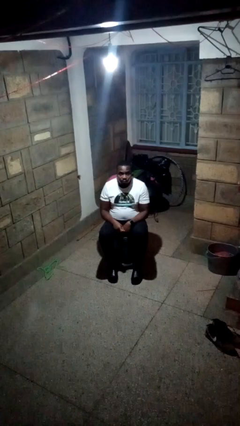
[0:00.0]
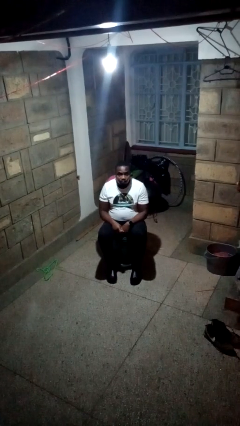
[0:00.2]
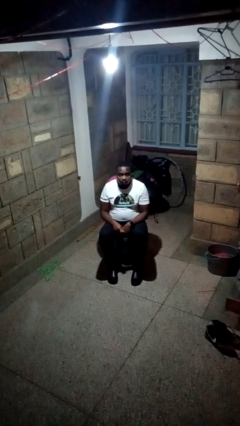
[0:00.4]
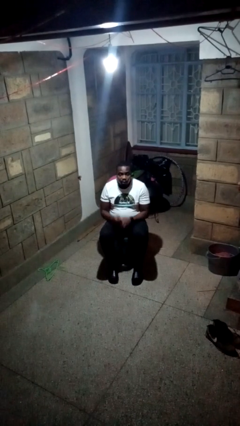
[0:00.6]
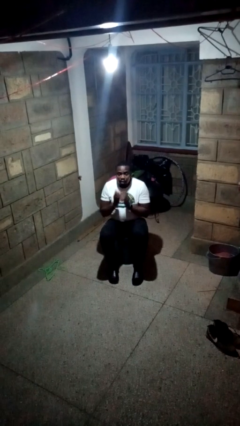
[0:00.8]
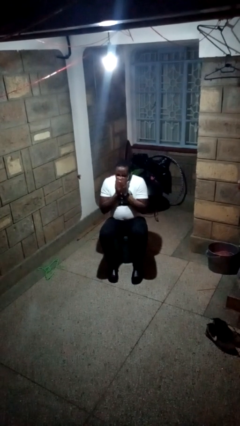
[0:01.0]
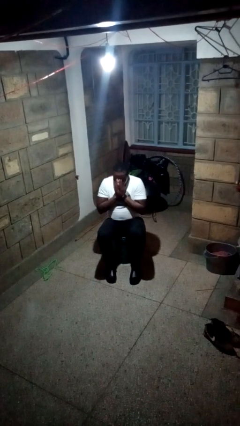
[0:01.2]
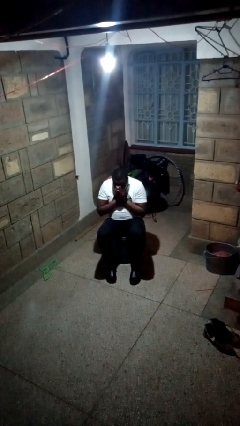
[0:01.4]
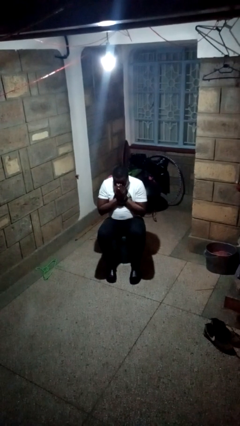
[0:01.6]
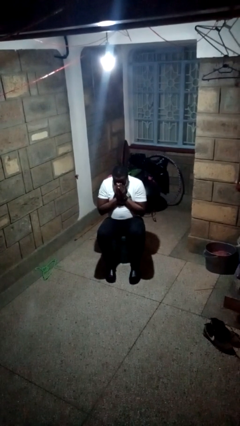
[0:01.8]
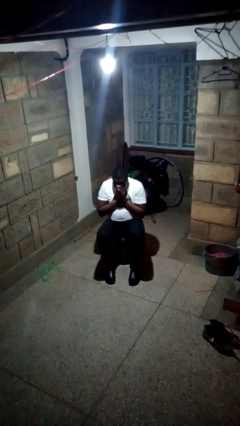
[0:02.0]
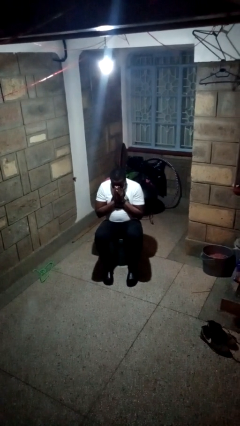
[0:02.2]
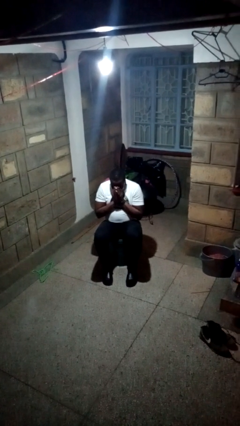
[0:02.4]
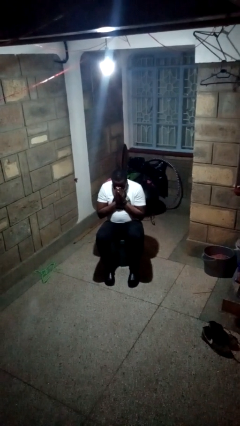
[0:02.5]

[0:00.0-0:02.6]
person sneezes into hand

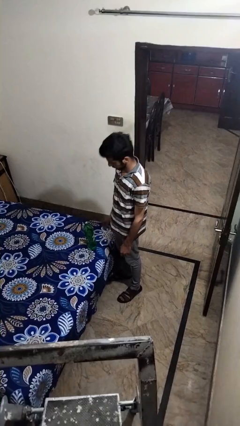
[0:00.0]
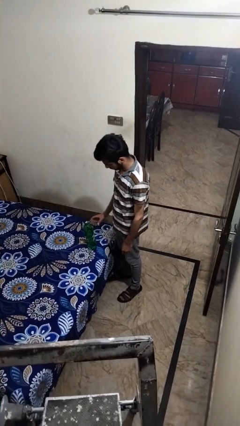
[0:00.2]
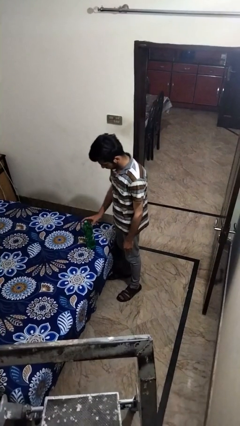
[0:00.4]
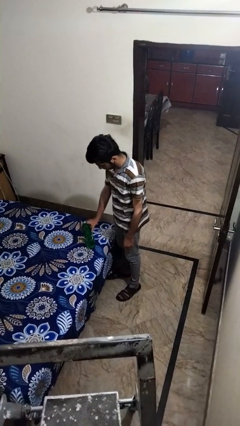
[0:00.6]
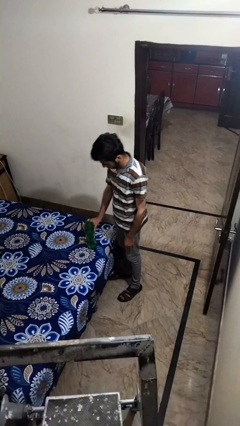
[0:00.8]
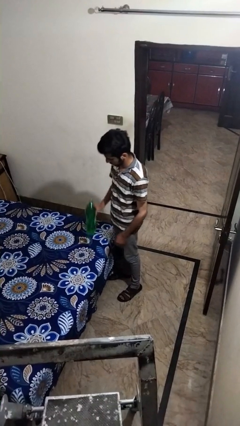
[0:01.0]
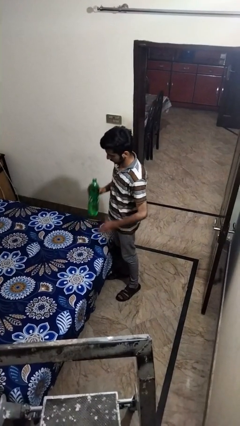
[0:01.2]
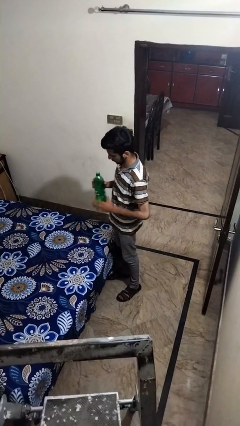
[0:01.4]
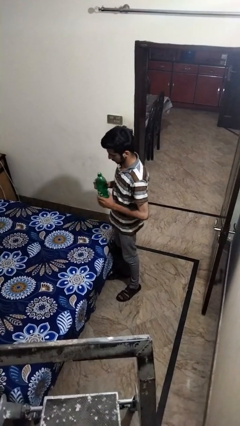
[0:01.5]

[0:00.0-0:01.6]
person picks up object from bed

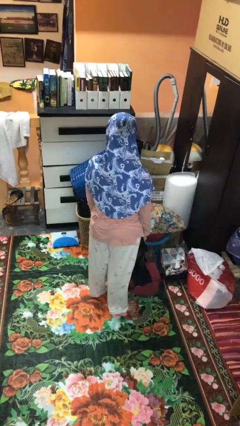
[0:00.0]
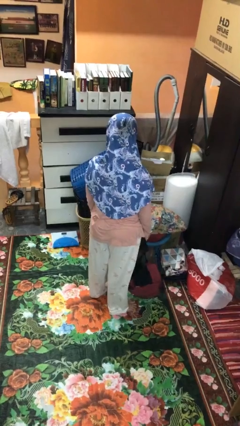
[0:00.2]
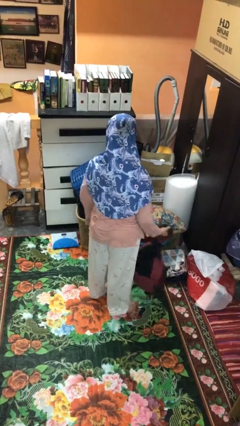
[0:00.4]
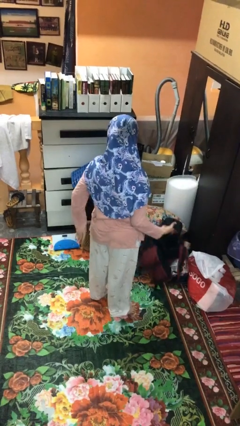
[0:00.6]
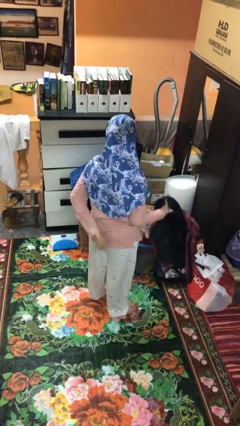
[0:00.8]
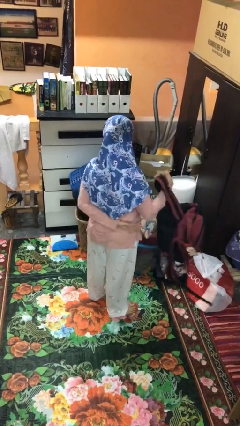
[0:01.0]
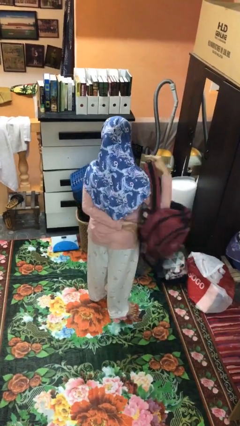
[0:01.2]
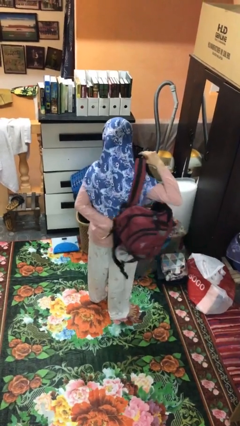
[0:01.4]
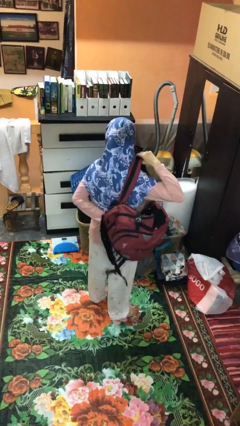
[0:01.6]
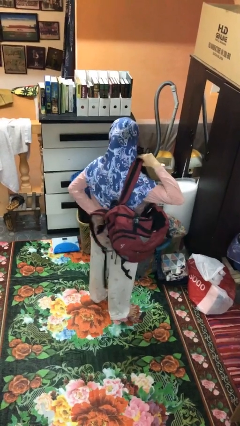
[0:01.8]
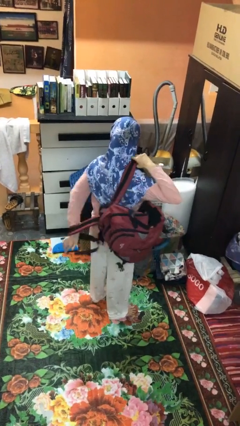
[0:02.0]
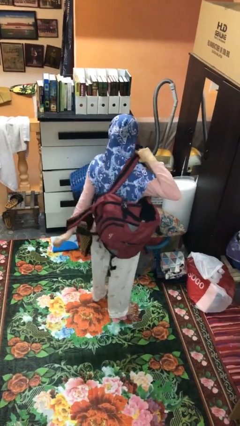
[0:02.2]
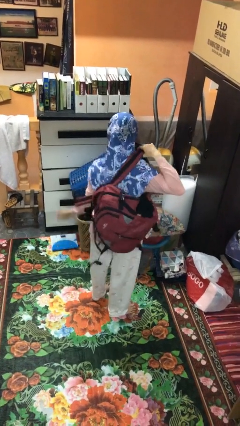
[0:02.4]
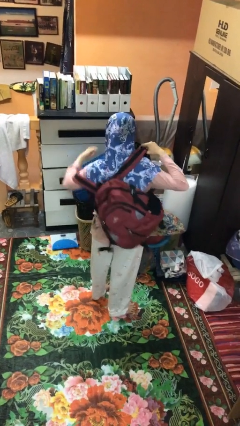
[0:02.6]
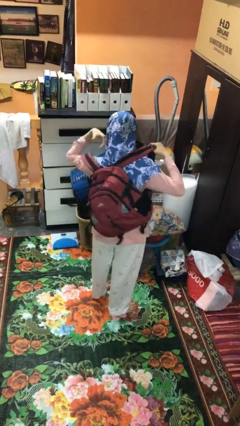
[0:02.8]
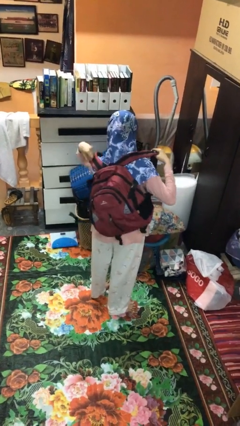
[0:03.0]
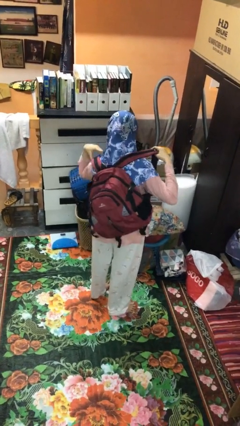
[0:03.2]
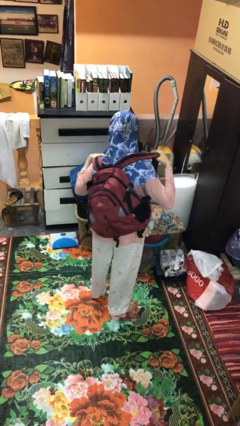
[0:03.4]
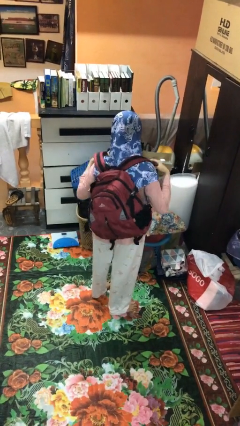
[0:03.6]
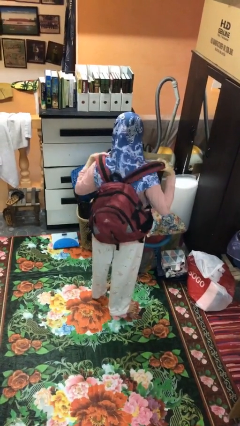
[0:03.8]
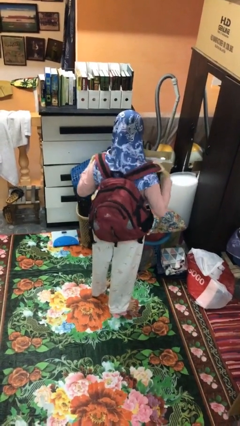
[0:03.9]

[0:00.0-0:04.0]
person puts on backpack

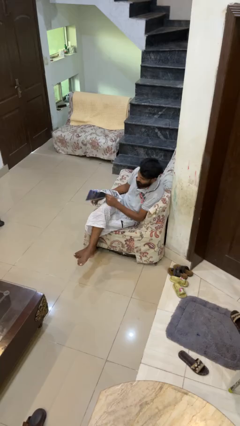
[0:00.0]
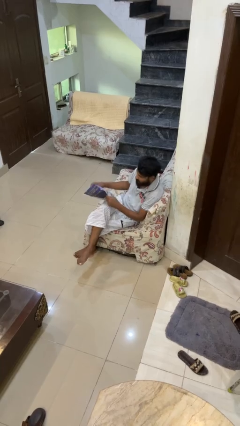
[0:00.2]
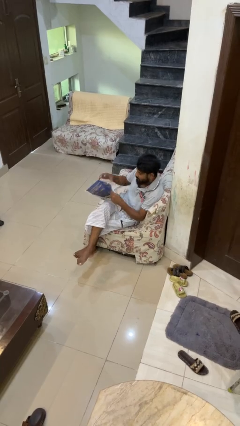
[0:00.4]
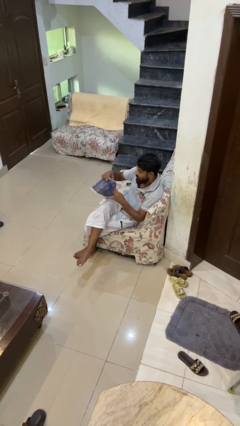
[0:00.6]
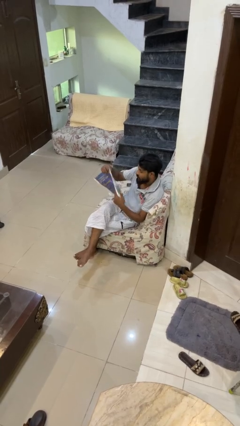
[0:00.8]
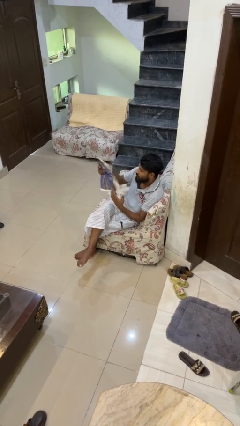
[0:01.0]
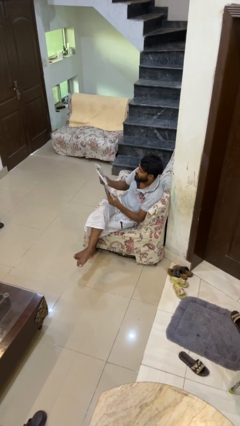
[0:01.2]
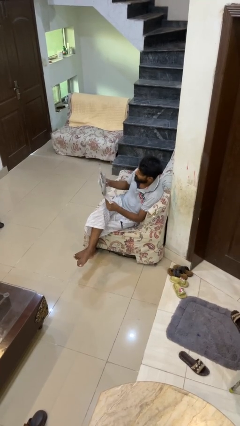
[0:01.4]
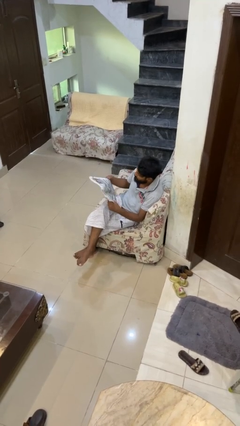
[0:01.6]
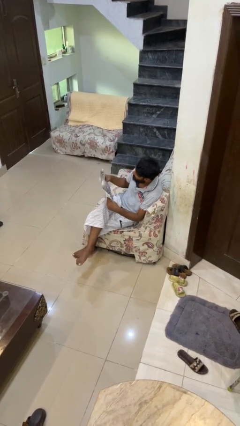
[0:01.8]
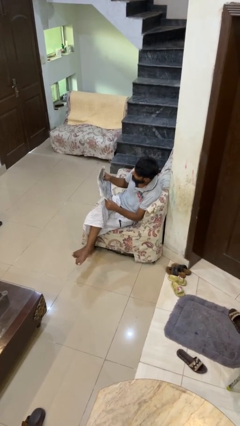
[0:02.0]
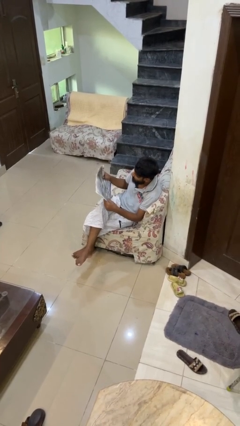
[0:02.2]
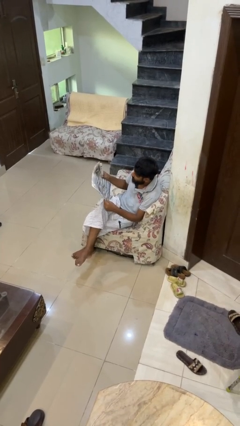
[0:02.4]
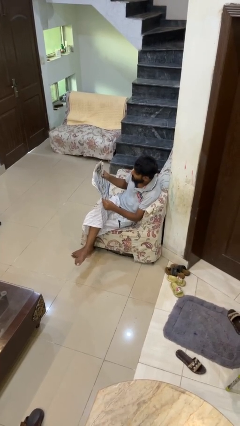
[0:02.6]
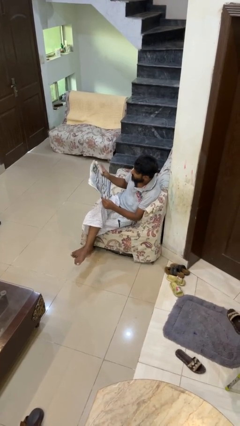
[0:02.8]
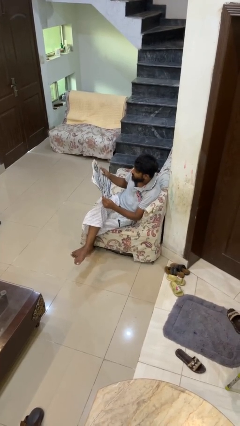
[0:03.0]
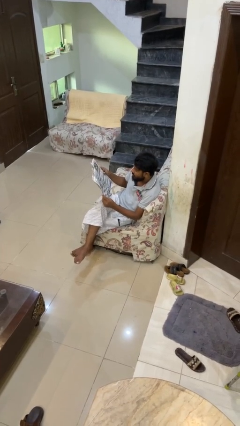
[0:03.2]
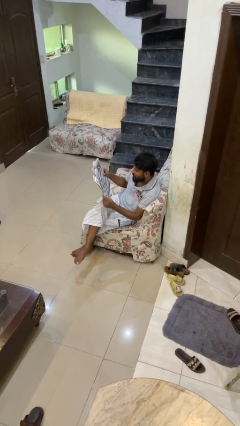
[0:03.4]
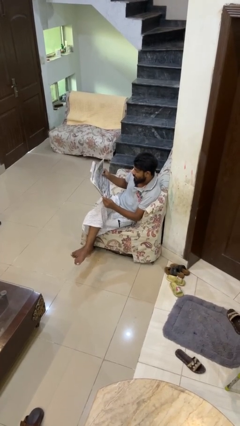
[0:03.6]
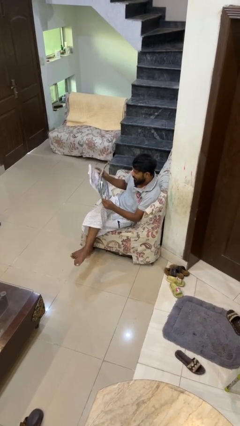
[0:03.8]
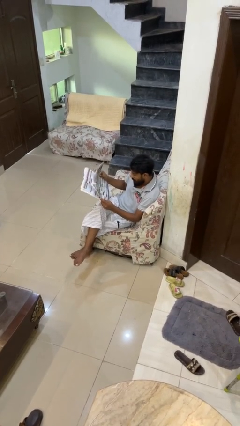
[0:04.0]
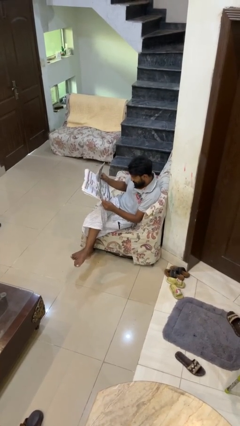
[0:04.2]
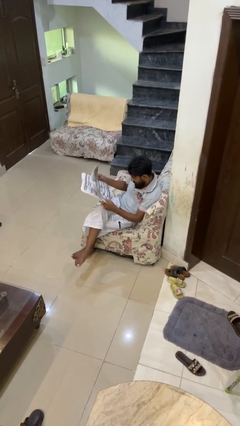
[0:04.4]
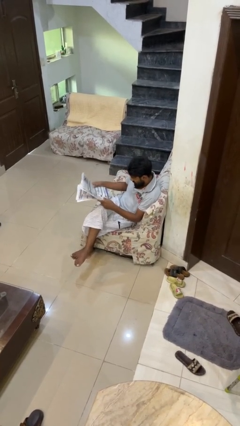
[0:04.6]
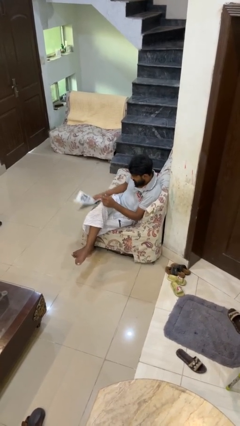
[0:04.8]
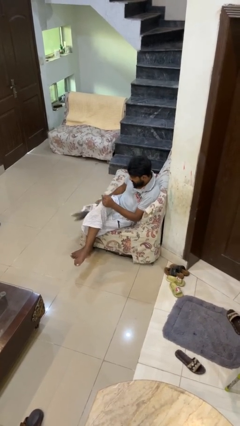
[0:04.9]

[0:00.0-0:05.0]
person reads newspaper

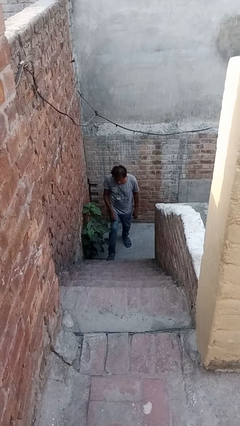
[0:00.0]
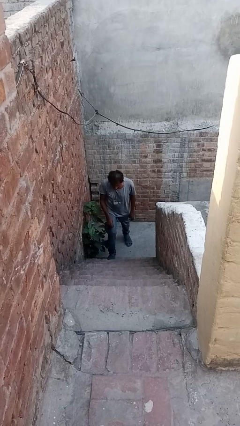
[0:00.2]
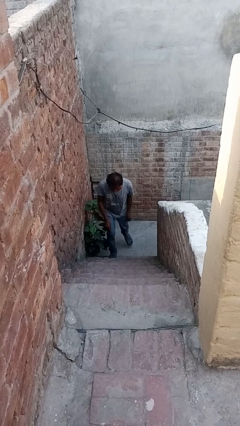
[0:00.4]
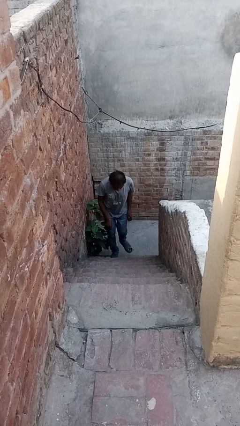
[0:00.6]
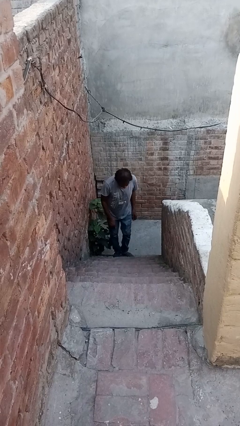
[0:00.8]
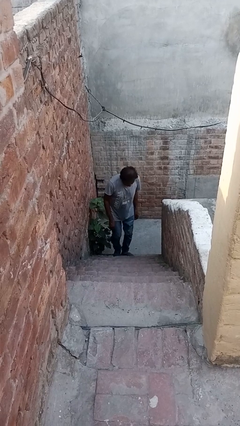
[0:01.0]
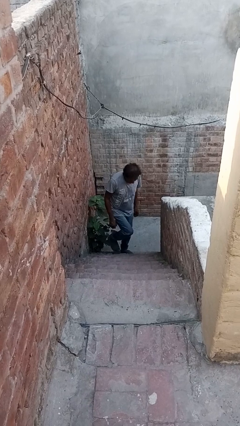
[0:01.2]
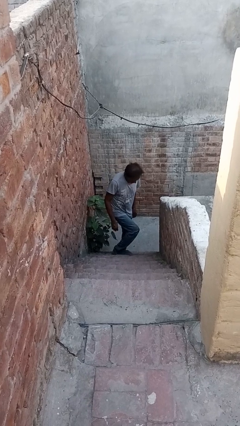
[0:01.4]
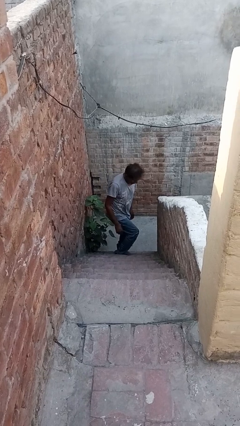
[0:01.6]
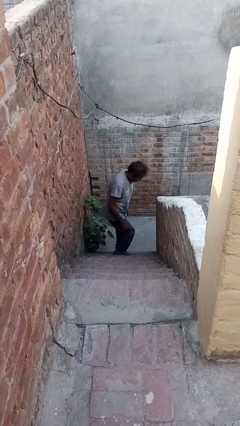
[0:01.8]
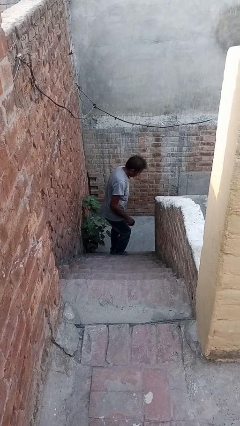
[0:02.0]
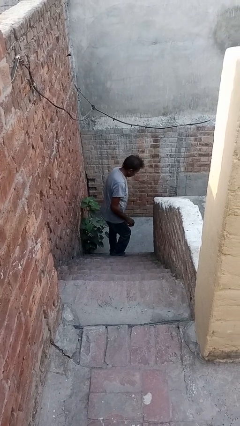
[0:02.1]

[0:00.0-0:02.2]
person climbs up stairs

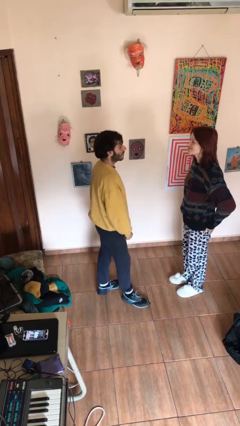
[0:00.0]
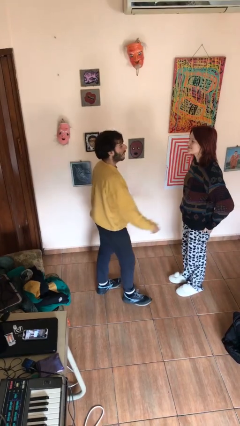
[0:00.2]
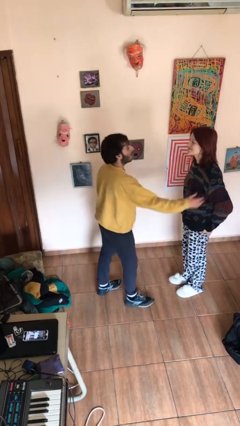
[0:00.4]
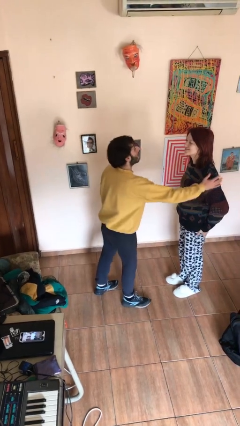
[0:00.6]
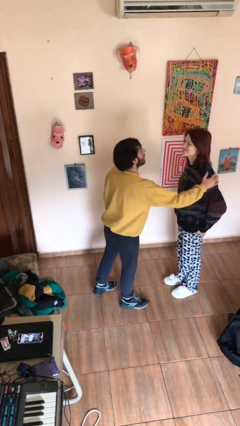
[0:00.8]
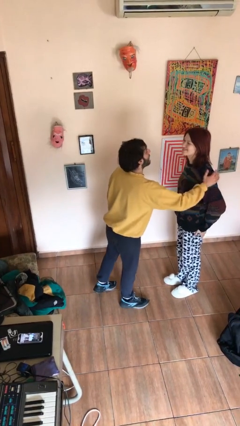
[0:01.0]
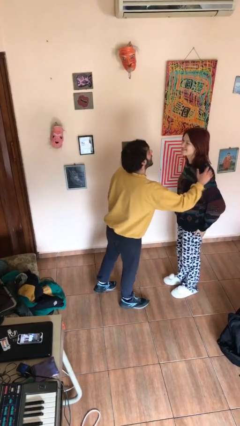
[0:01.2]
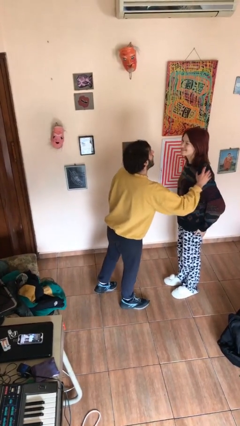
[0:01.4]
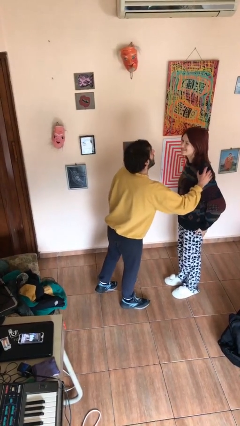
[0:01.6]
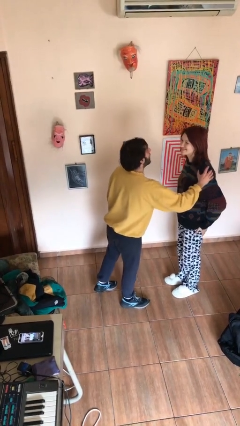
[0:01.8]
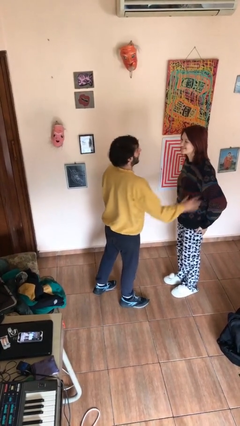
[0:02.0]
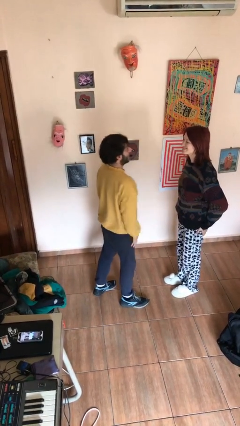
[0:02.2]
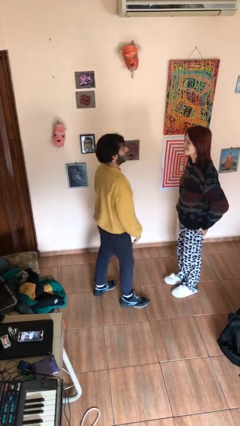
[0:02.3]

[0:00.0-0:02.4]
person pounds shoulders of person
